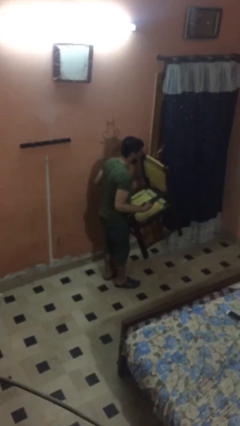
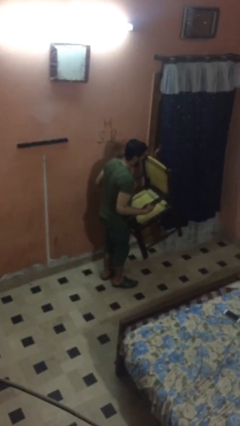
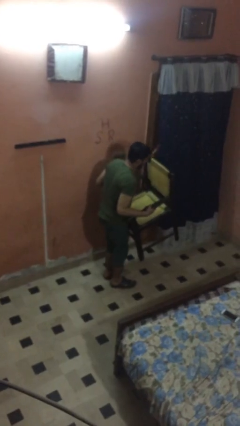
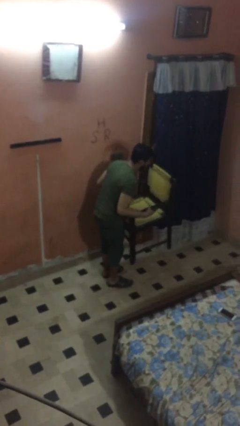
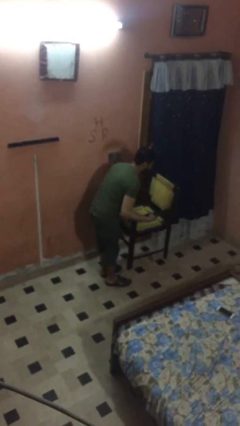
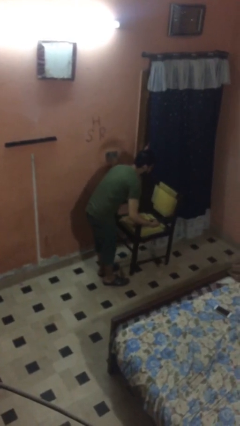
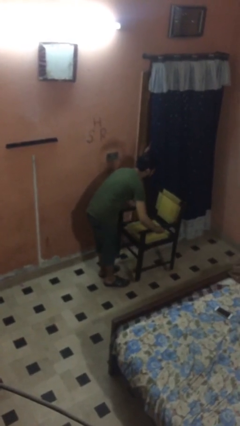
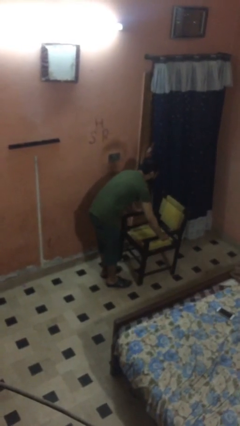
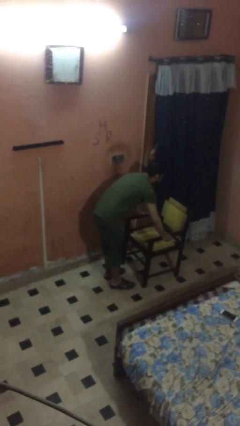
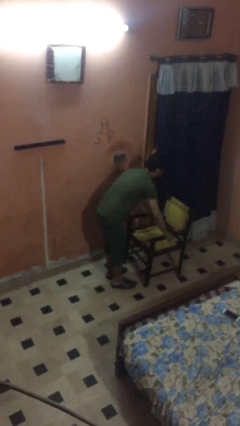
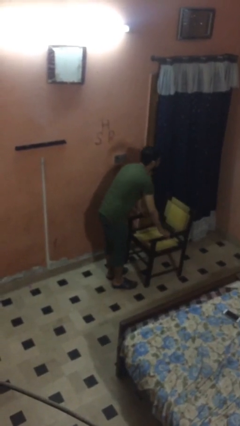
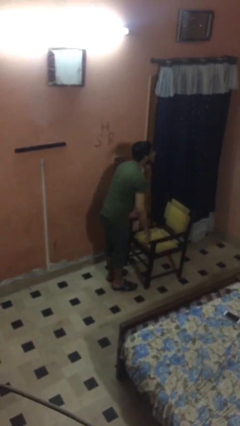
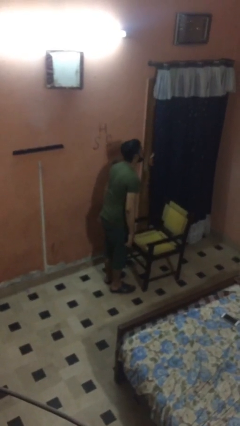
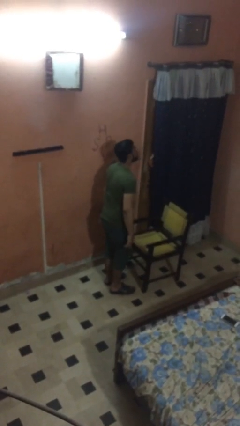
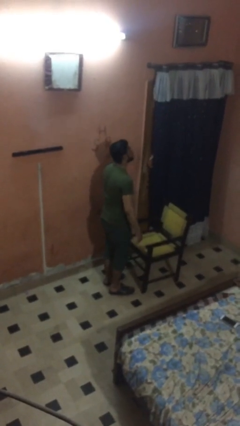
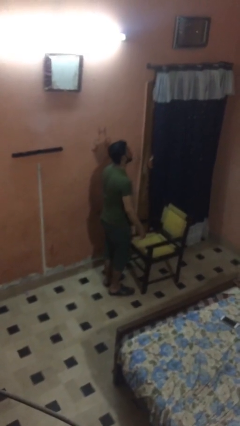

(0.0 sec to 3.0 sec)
person puts down object on floor

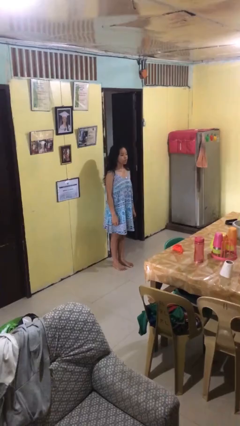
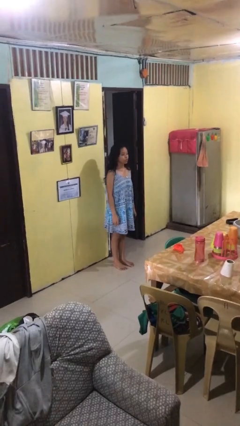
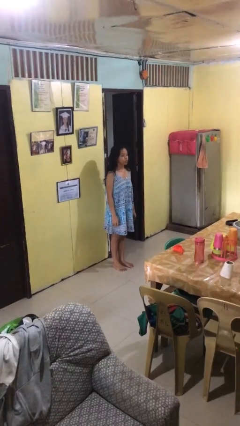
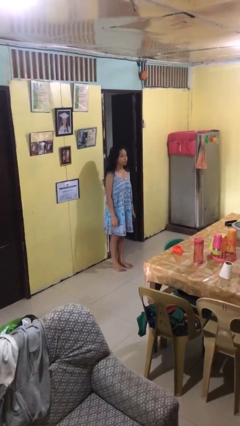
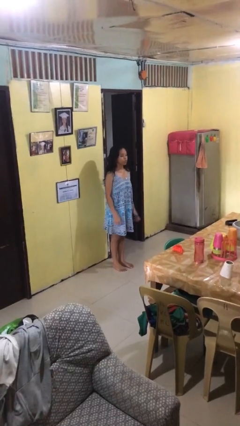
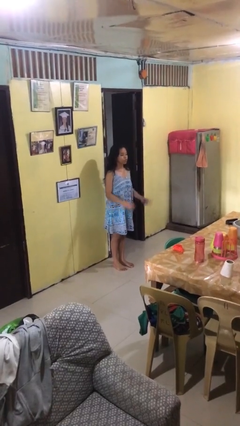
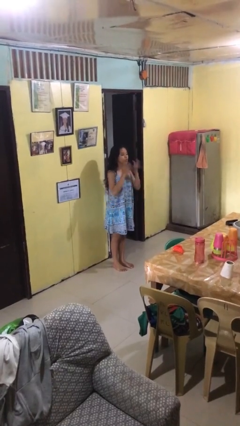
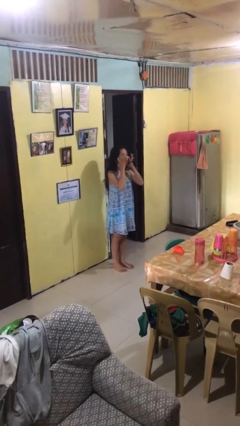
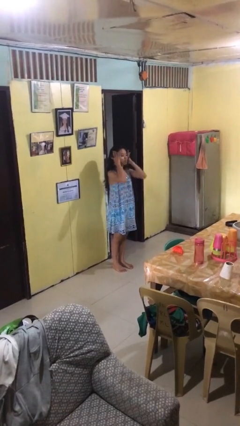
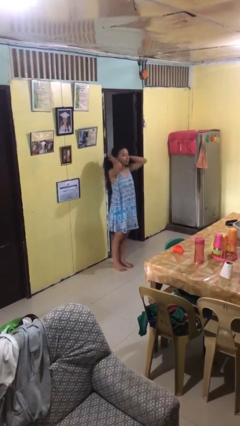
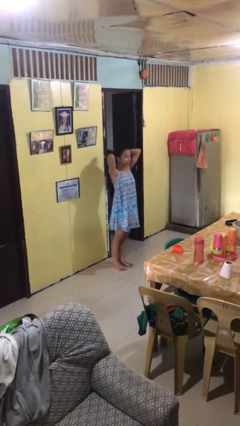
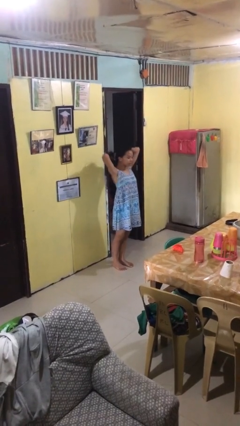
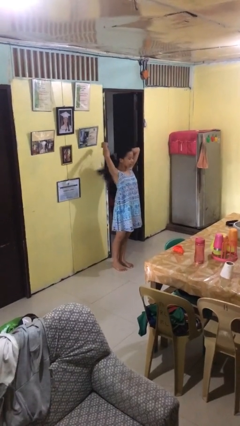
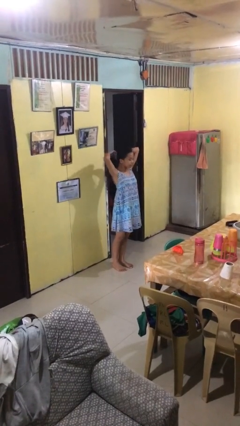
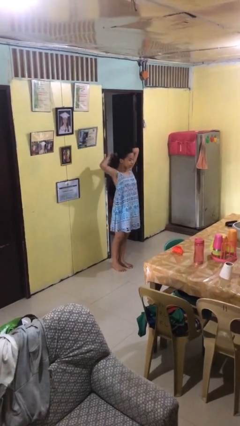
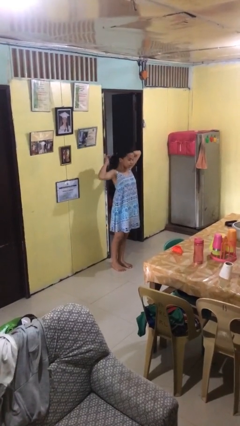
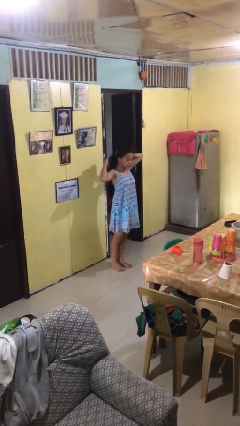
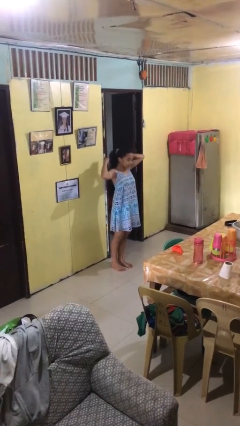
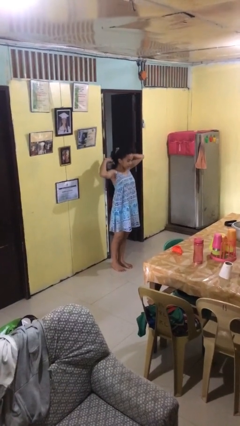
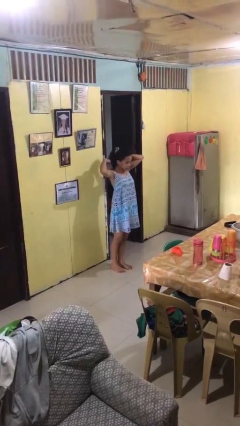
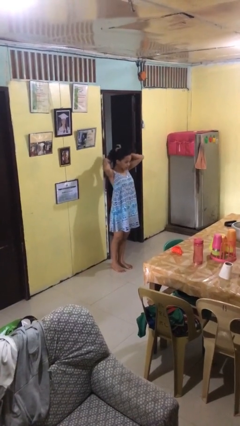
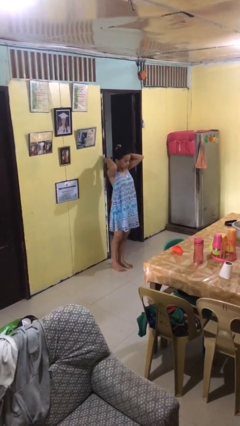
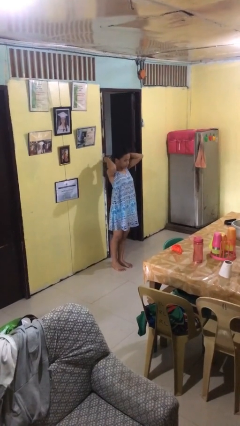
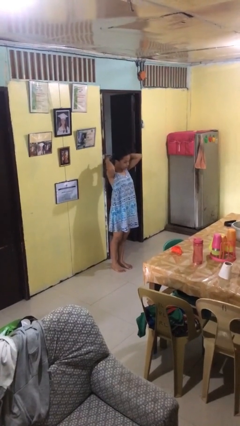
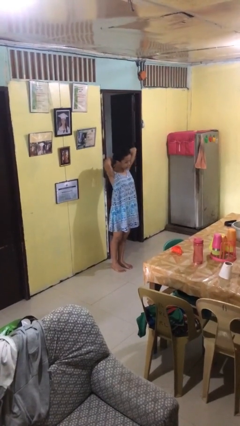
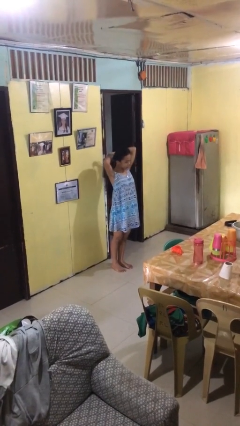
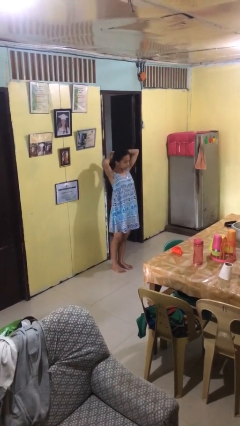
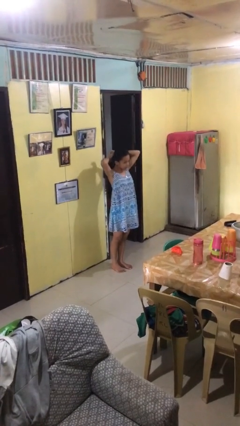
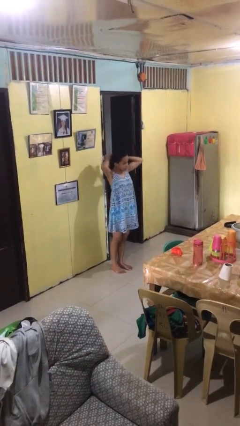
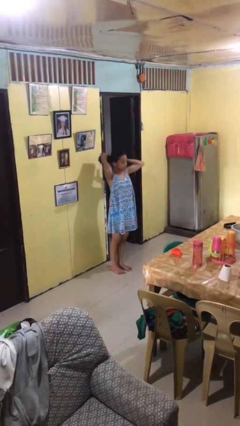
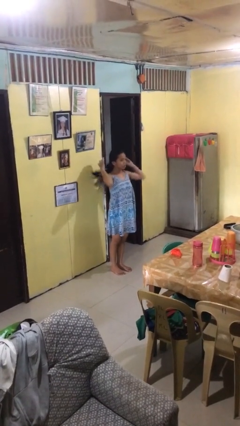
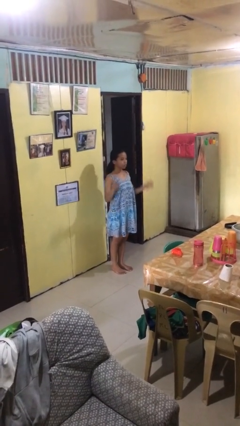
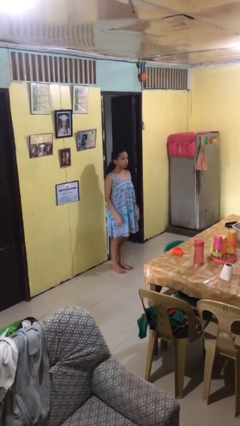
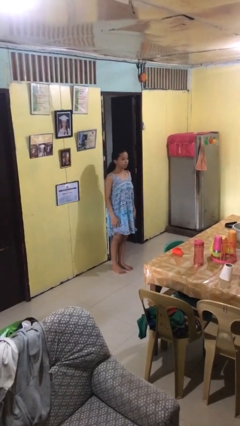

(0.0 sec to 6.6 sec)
person puts hair in ponytail

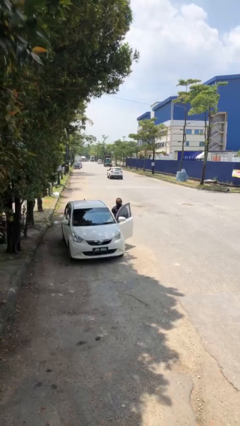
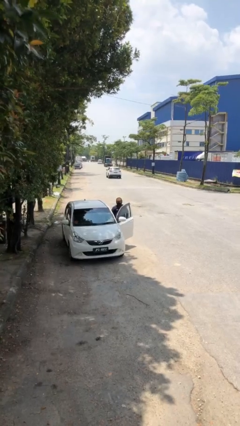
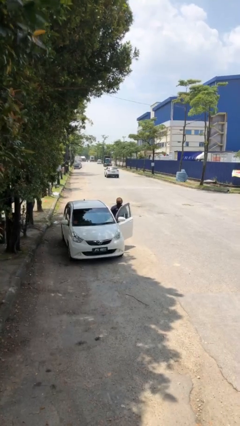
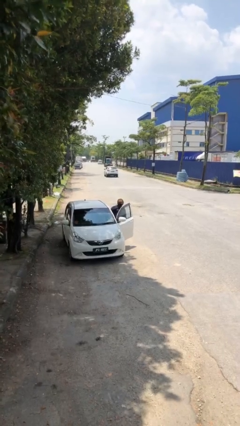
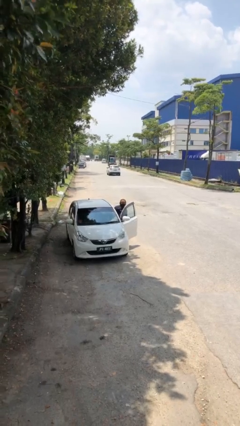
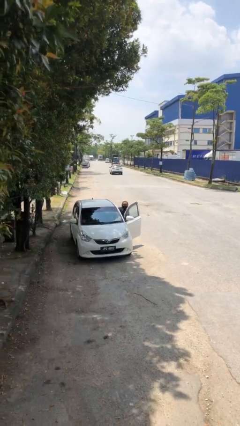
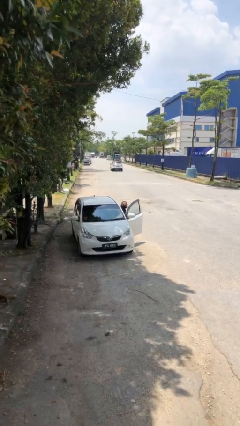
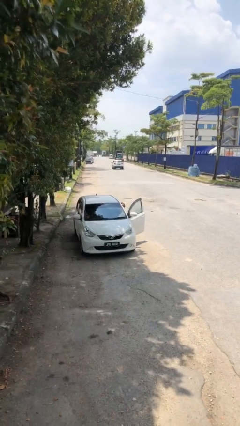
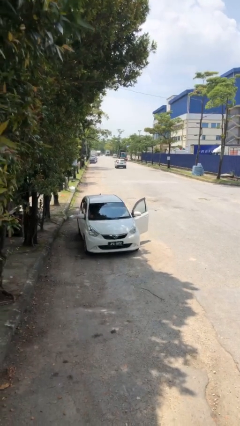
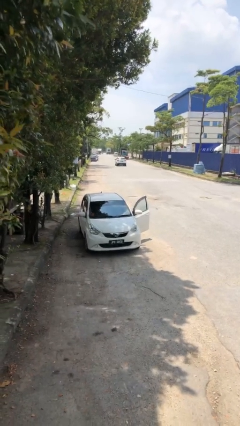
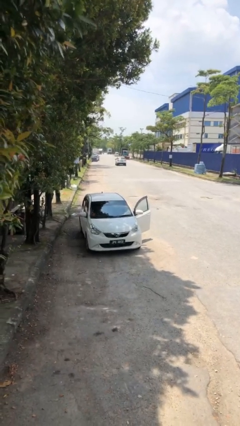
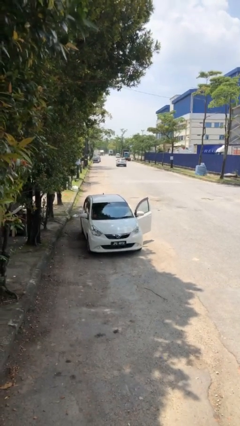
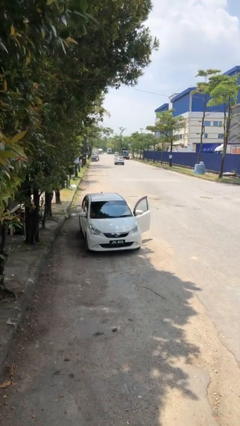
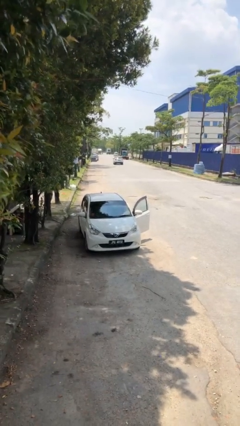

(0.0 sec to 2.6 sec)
person enters car

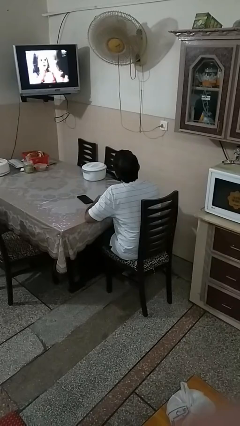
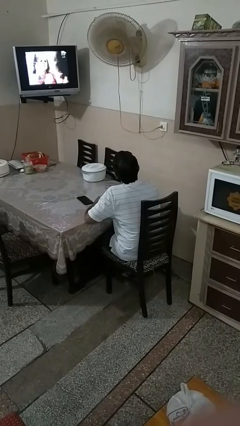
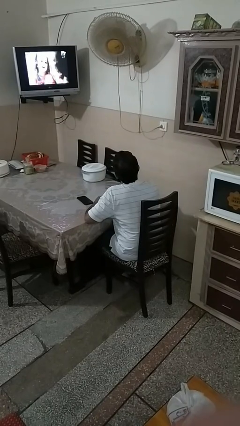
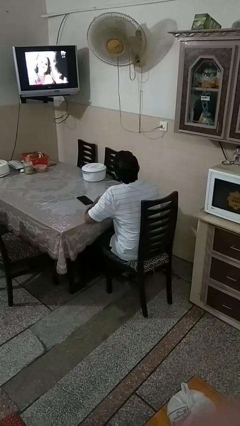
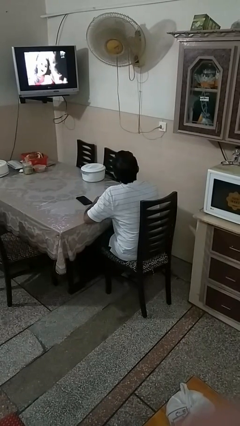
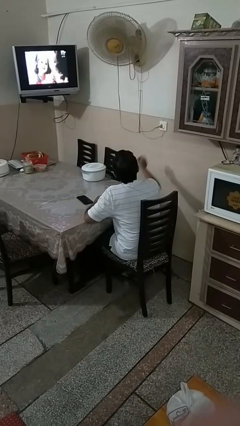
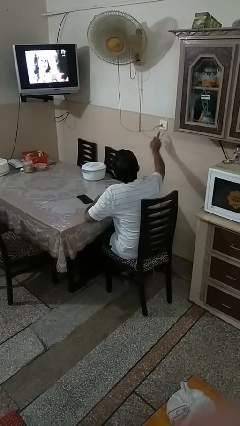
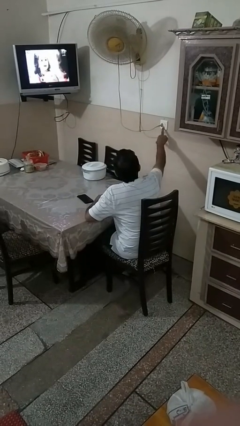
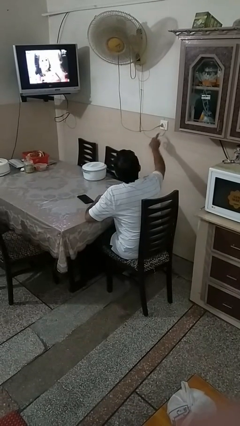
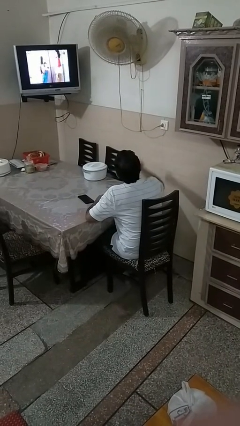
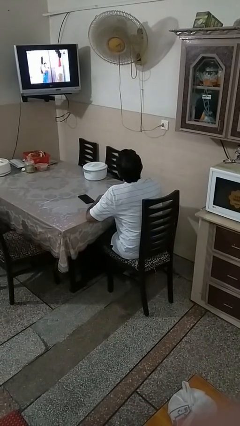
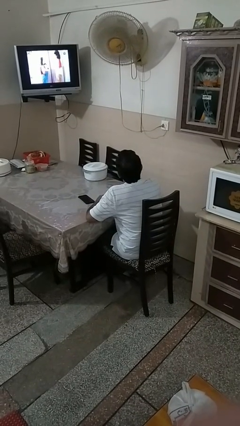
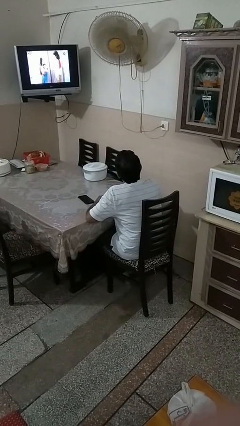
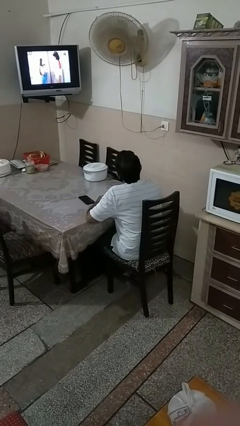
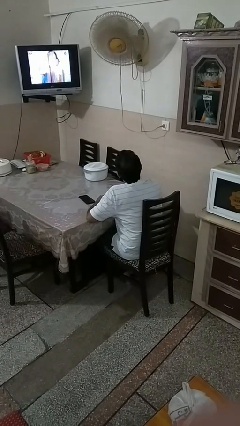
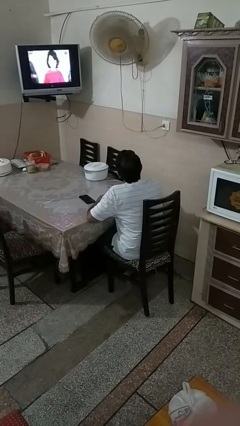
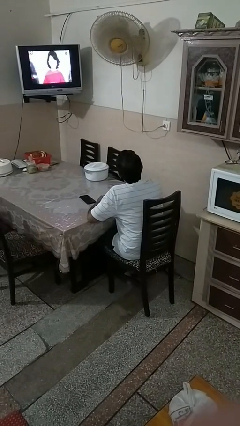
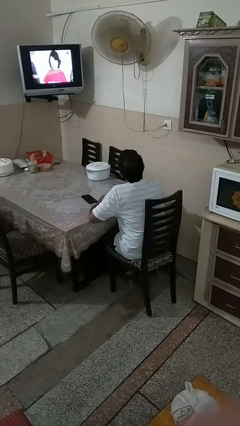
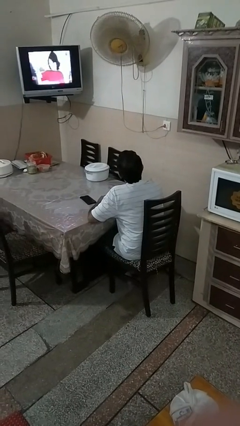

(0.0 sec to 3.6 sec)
person turns on fan

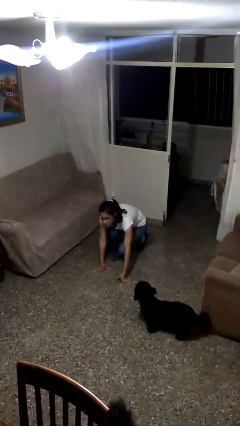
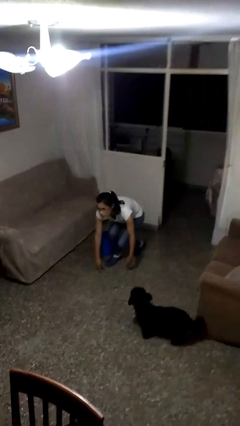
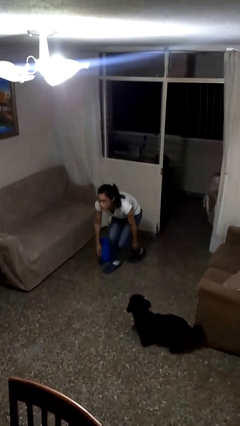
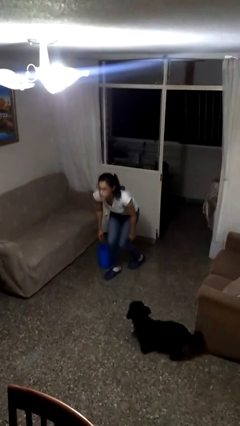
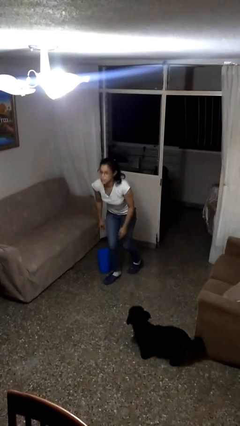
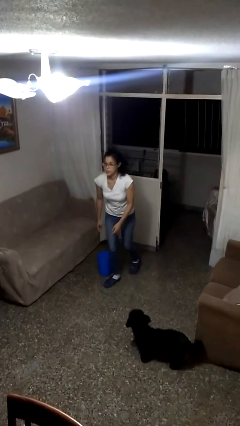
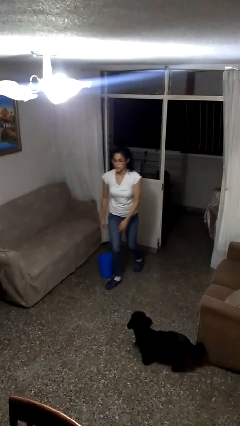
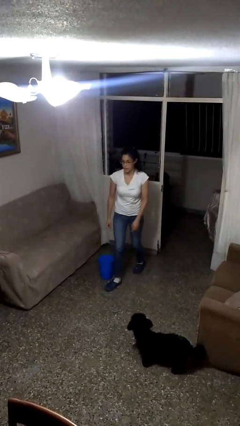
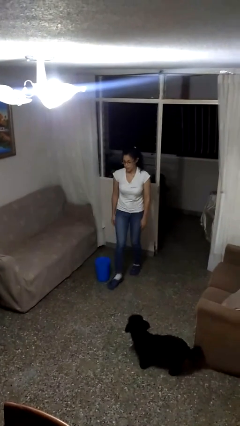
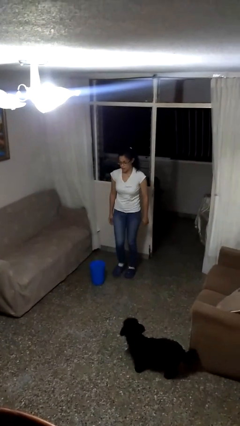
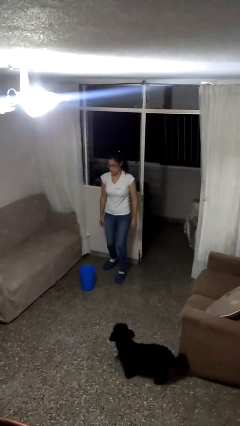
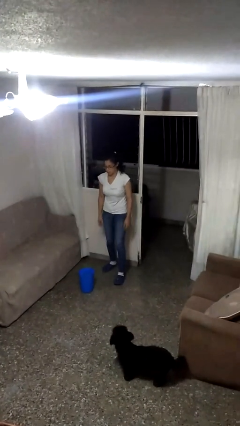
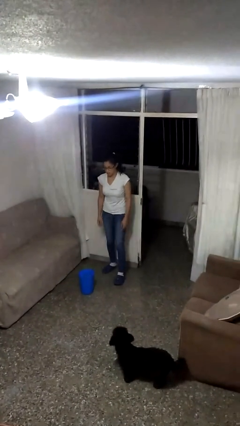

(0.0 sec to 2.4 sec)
person stands up from floor
